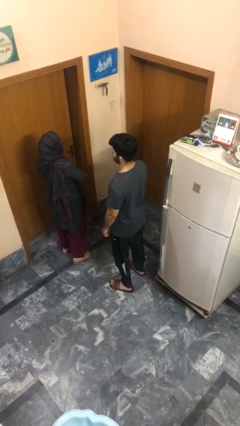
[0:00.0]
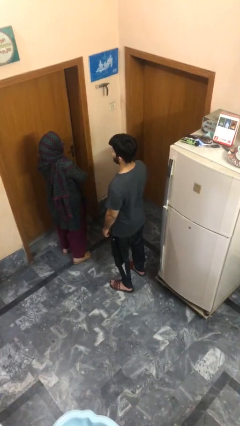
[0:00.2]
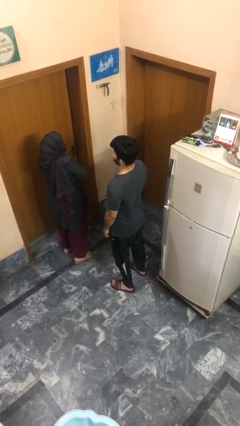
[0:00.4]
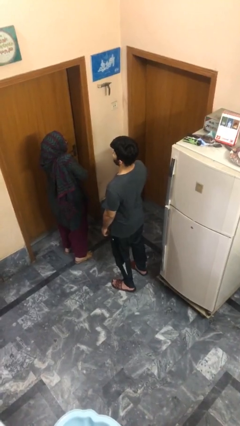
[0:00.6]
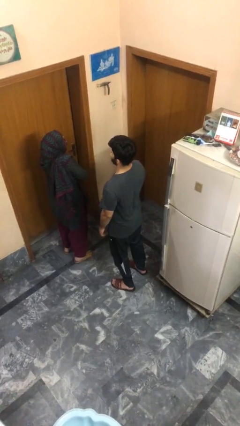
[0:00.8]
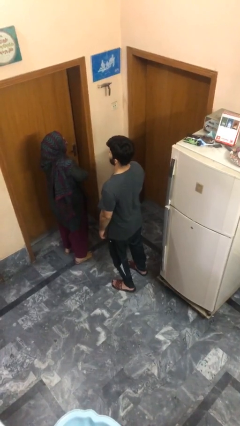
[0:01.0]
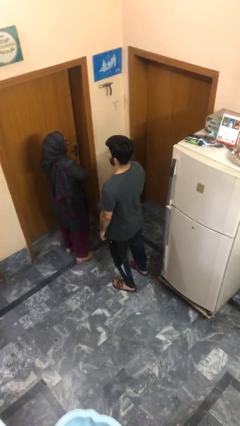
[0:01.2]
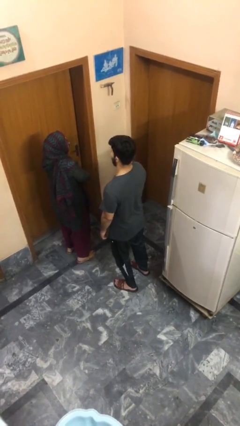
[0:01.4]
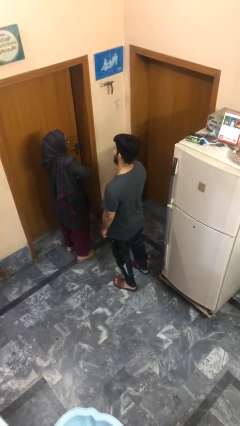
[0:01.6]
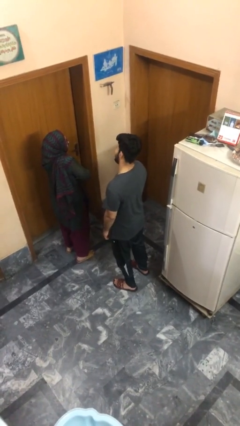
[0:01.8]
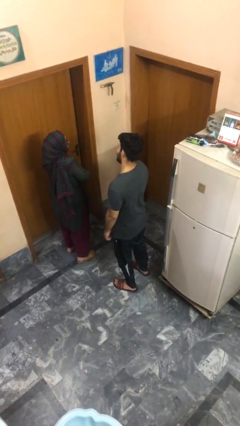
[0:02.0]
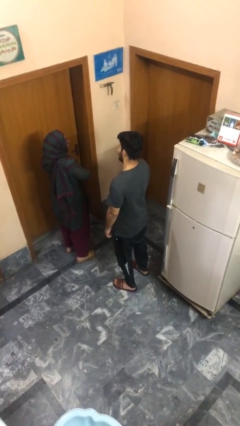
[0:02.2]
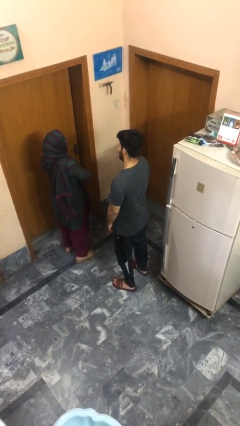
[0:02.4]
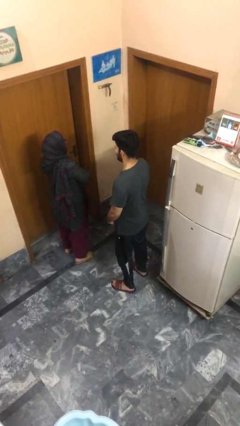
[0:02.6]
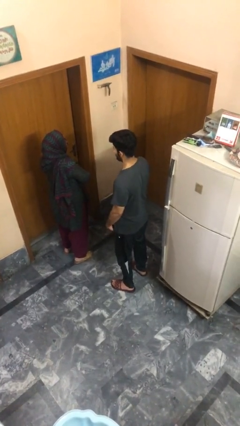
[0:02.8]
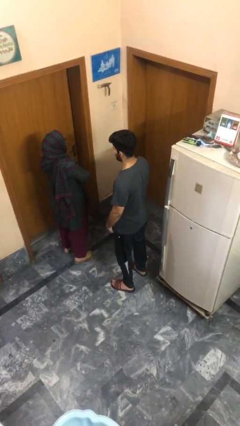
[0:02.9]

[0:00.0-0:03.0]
person laughs with person

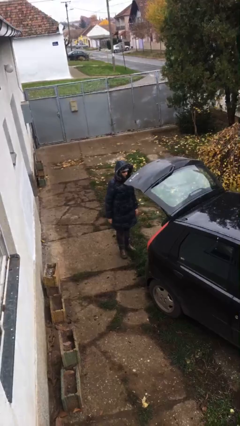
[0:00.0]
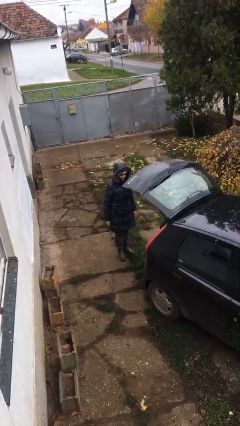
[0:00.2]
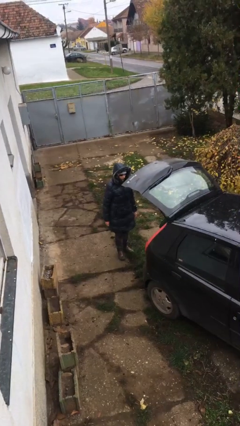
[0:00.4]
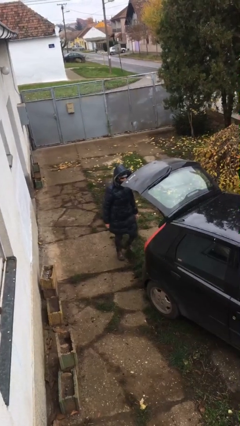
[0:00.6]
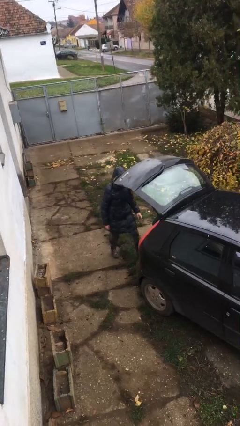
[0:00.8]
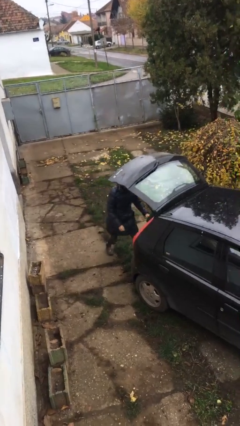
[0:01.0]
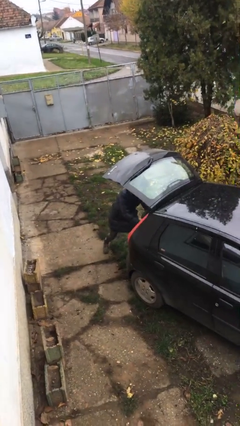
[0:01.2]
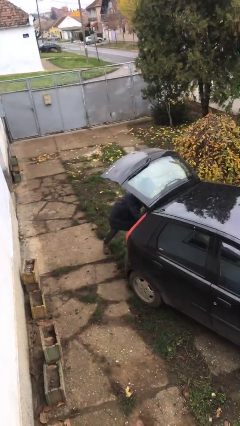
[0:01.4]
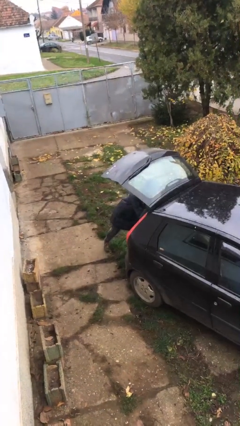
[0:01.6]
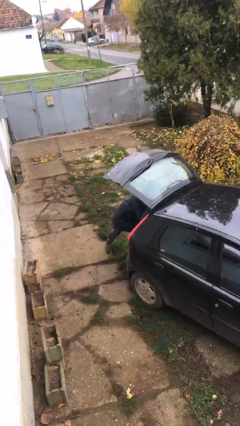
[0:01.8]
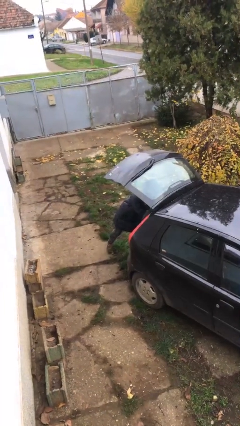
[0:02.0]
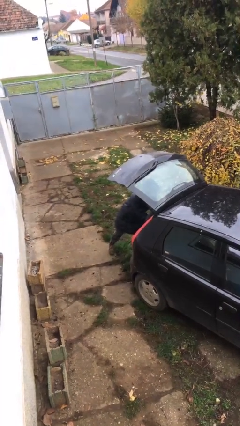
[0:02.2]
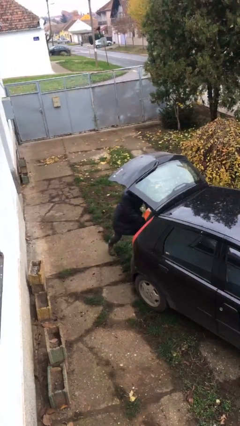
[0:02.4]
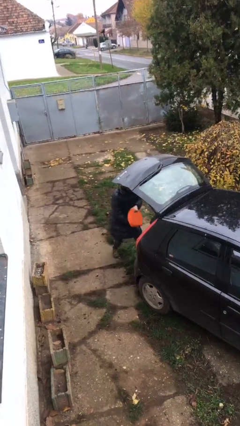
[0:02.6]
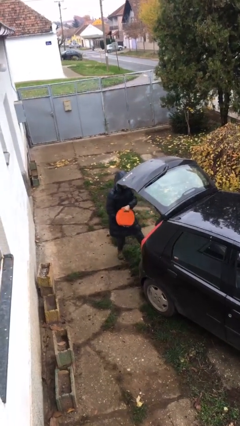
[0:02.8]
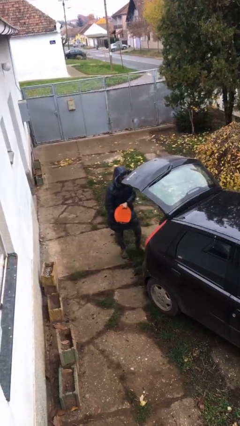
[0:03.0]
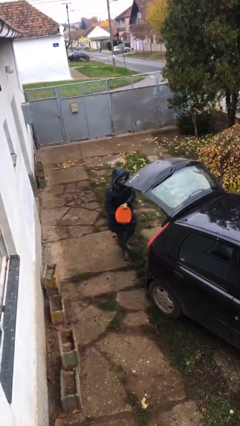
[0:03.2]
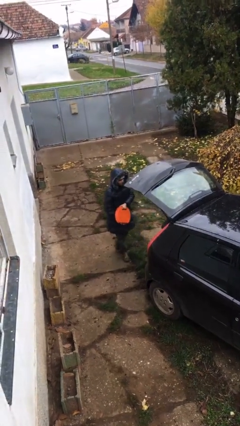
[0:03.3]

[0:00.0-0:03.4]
person unloads car

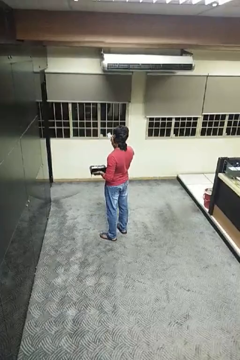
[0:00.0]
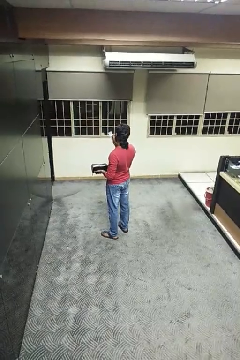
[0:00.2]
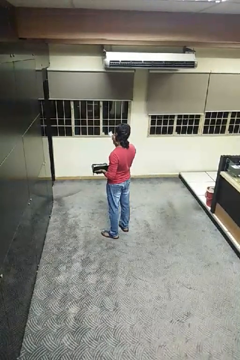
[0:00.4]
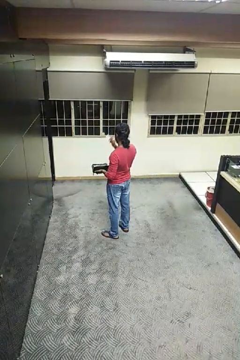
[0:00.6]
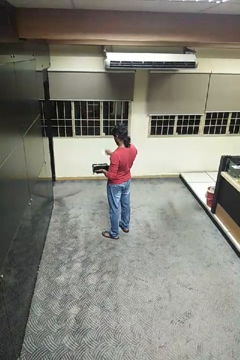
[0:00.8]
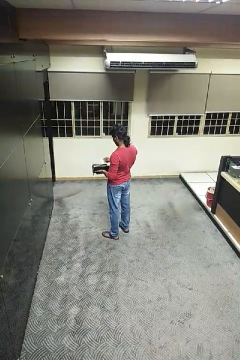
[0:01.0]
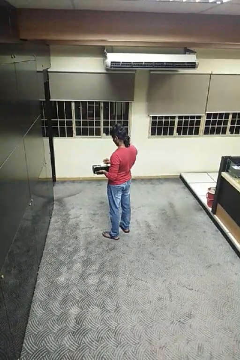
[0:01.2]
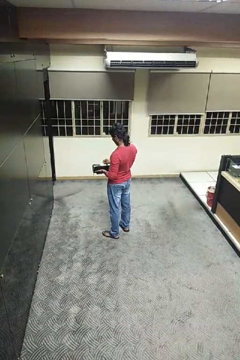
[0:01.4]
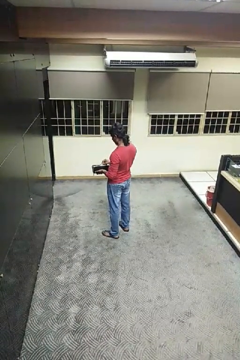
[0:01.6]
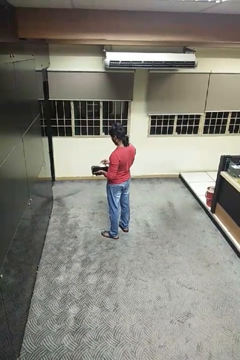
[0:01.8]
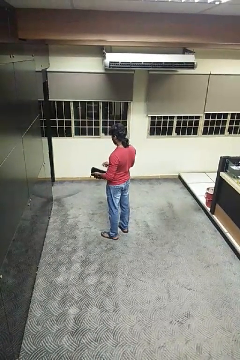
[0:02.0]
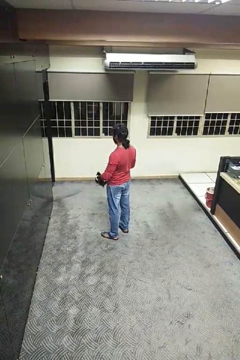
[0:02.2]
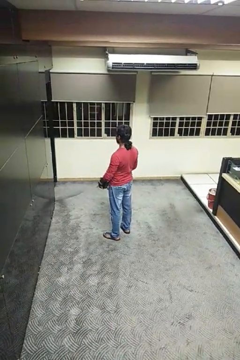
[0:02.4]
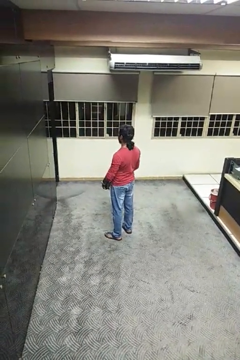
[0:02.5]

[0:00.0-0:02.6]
person puts object into purse

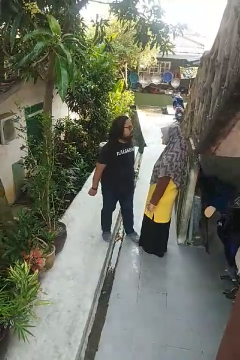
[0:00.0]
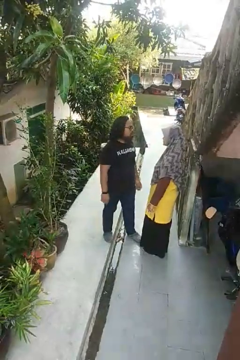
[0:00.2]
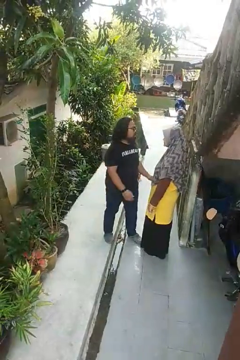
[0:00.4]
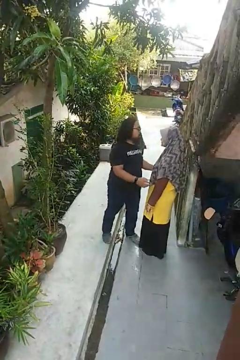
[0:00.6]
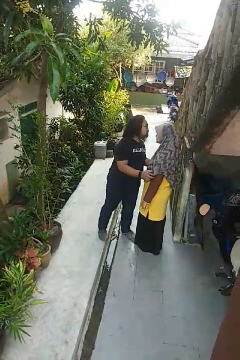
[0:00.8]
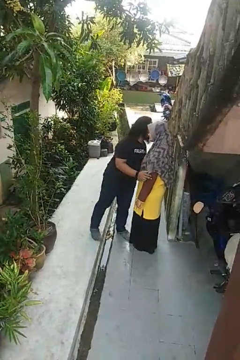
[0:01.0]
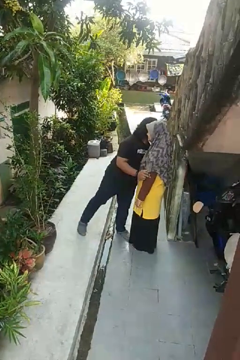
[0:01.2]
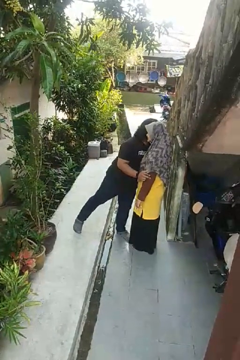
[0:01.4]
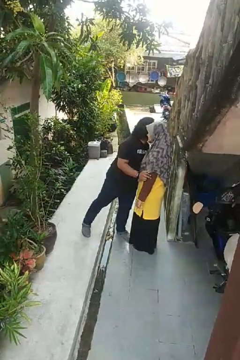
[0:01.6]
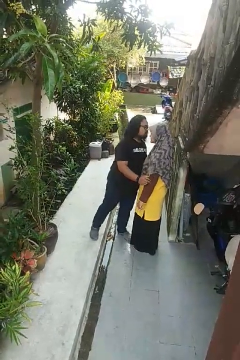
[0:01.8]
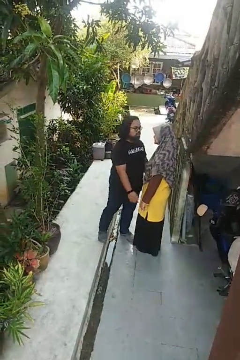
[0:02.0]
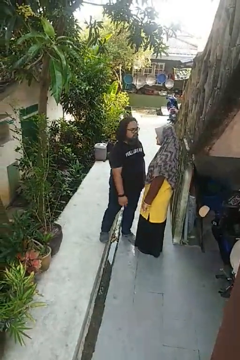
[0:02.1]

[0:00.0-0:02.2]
person kisses cheek of person

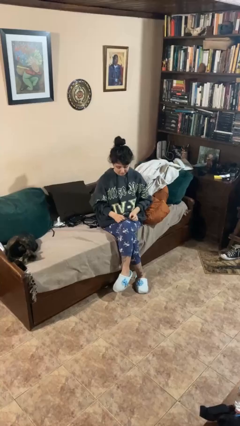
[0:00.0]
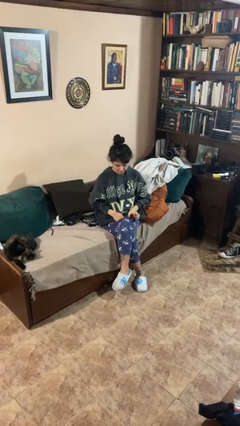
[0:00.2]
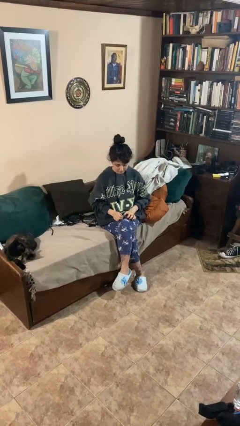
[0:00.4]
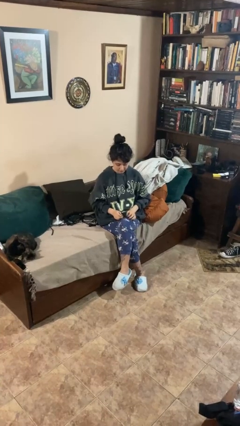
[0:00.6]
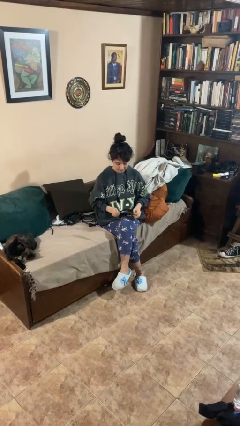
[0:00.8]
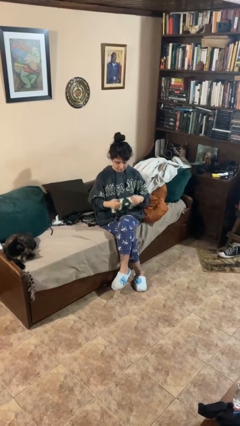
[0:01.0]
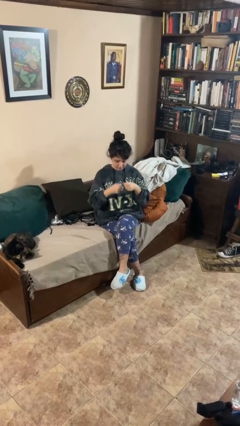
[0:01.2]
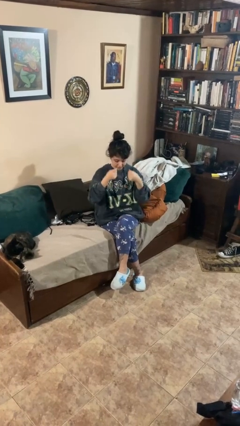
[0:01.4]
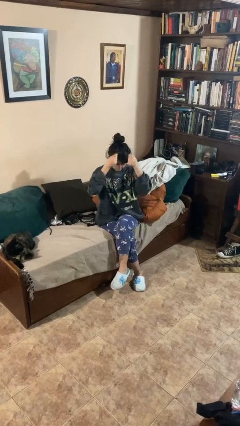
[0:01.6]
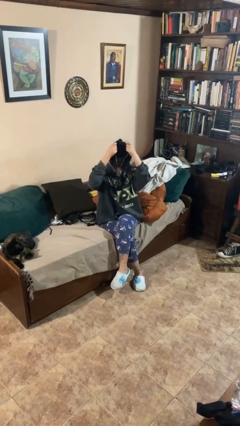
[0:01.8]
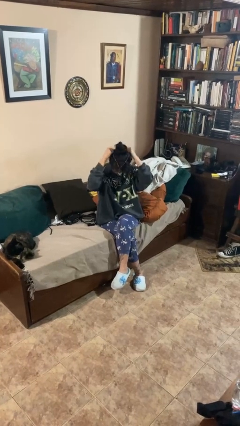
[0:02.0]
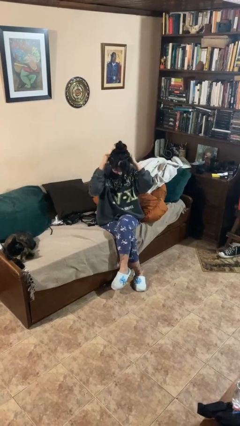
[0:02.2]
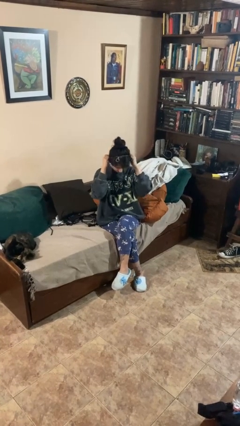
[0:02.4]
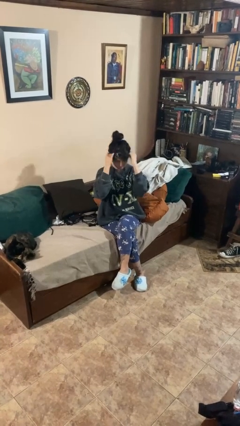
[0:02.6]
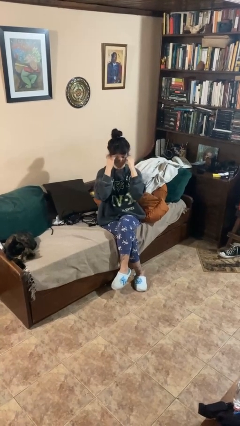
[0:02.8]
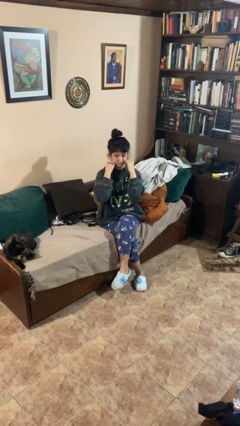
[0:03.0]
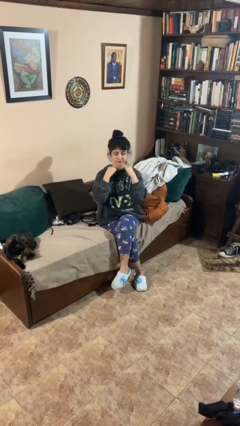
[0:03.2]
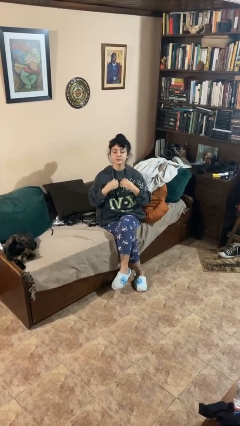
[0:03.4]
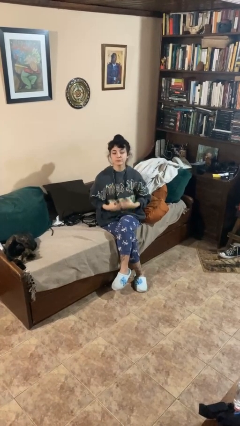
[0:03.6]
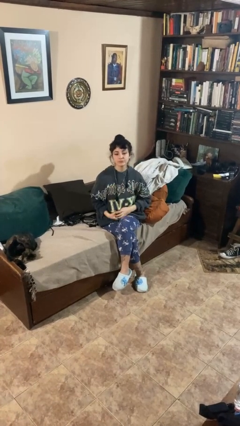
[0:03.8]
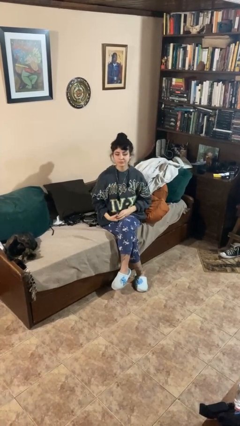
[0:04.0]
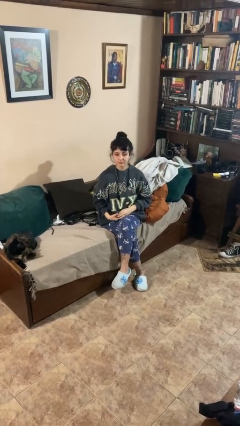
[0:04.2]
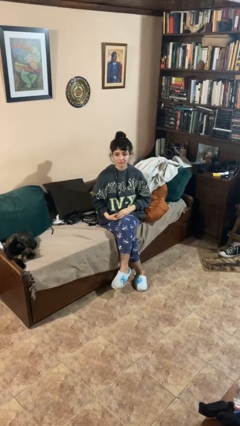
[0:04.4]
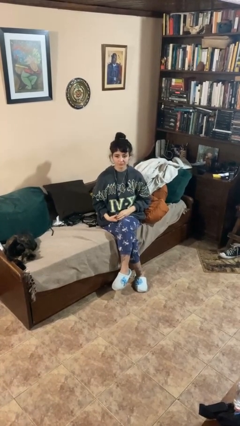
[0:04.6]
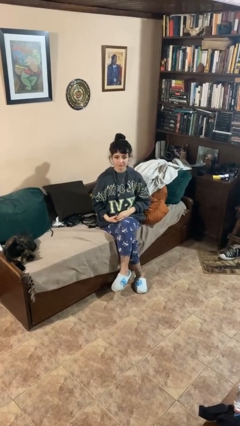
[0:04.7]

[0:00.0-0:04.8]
person puts on necklace

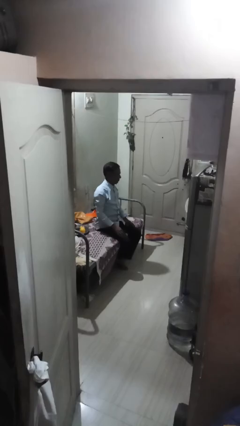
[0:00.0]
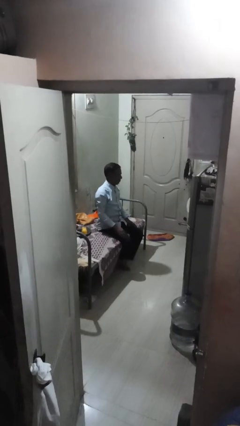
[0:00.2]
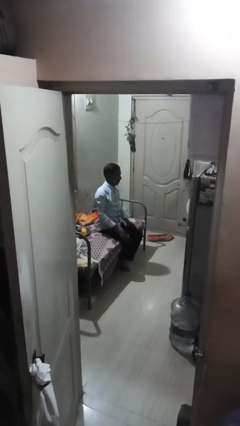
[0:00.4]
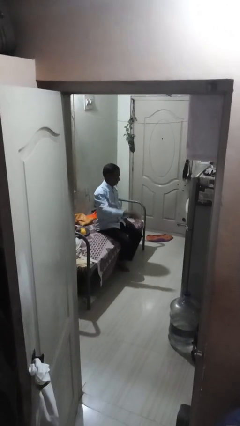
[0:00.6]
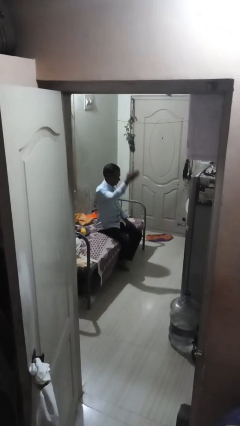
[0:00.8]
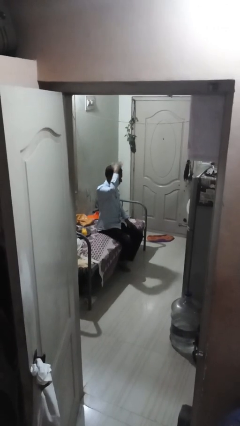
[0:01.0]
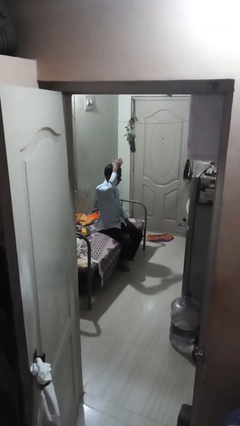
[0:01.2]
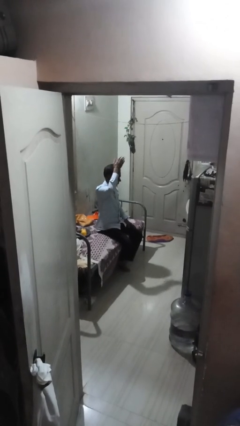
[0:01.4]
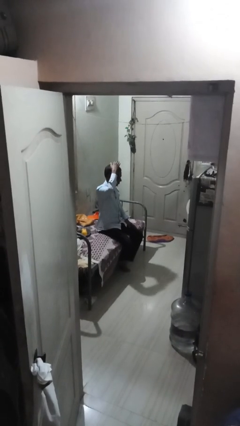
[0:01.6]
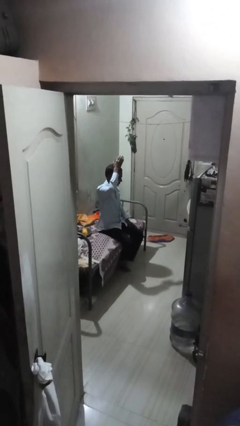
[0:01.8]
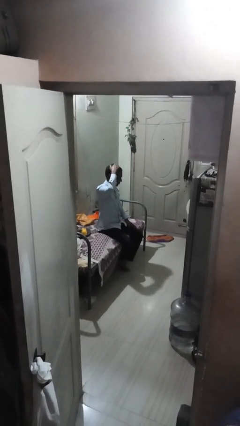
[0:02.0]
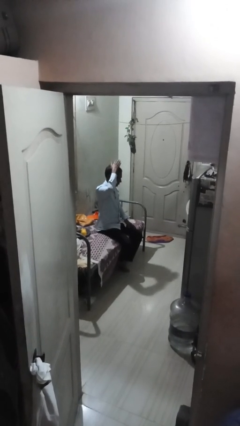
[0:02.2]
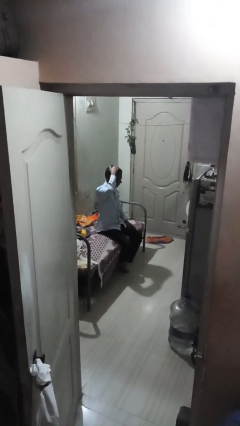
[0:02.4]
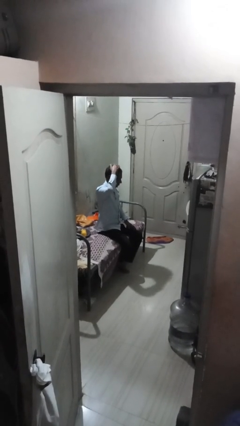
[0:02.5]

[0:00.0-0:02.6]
person pats head
